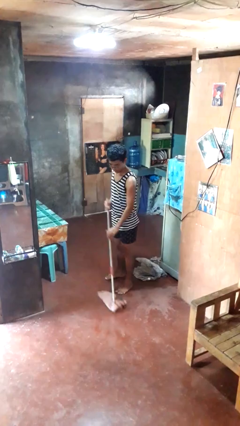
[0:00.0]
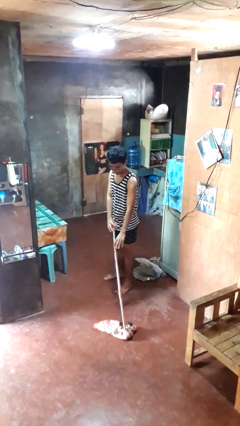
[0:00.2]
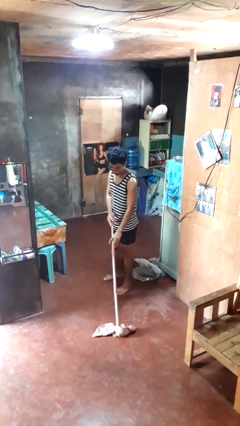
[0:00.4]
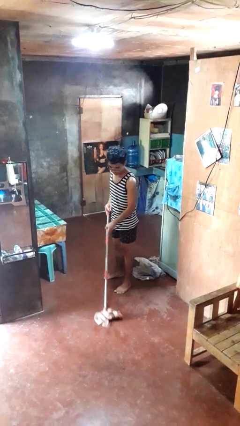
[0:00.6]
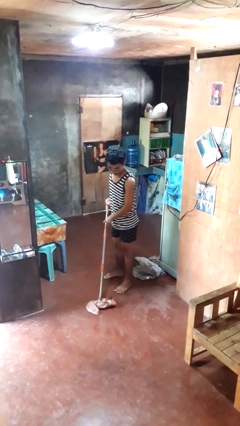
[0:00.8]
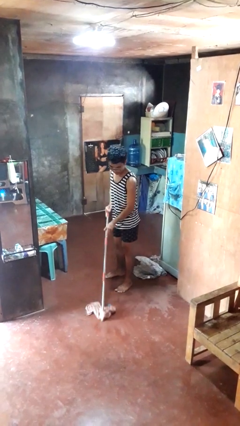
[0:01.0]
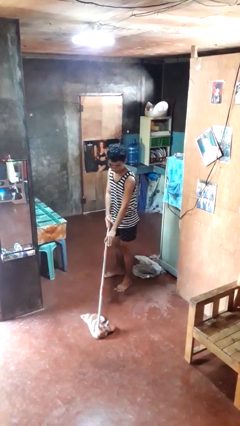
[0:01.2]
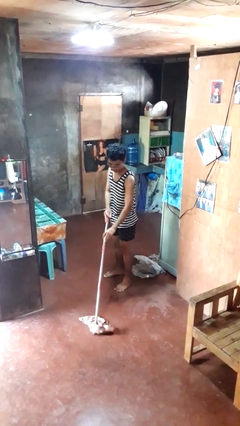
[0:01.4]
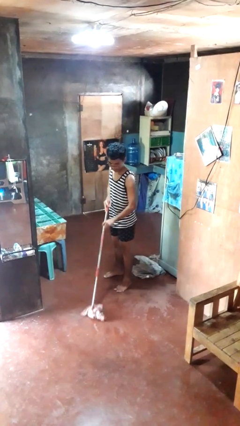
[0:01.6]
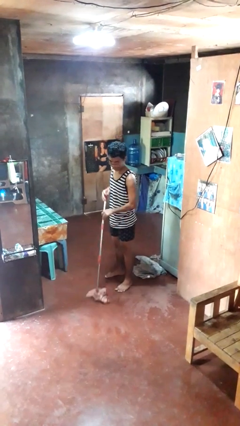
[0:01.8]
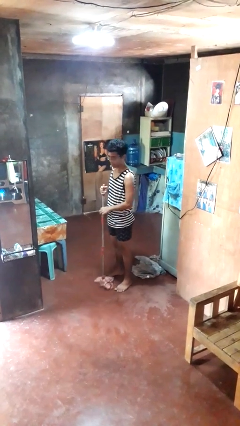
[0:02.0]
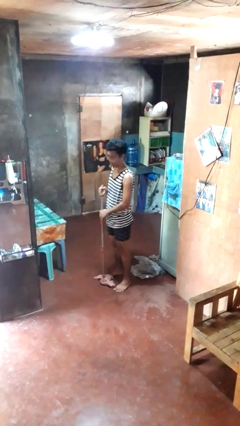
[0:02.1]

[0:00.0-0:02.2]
person mops

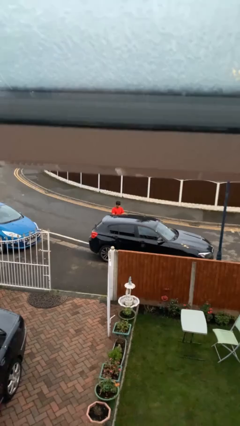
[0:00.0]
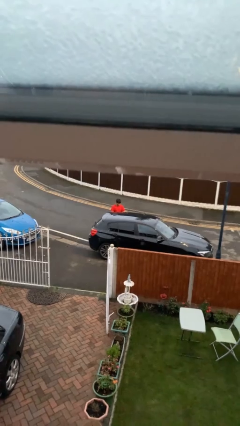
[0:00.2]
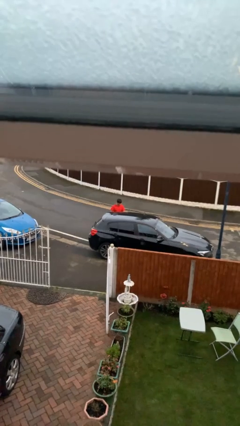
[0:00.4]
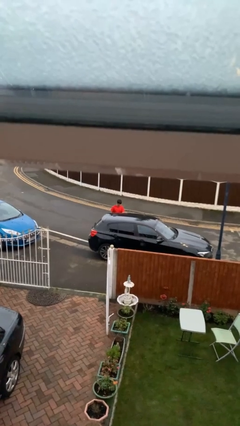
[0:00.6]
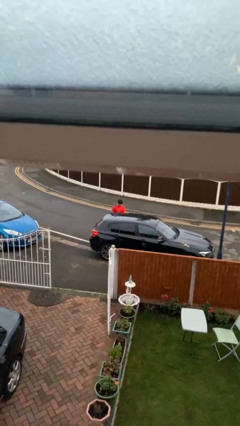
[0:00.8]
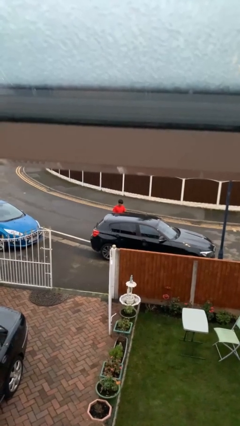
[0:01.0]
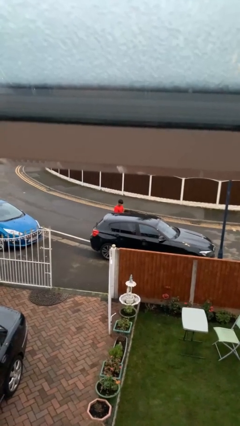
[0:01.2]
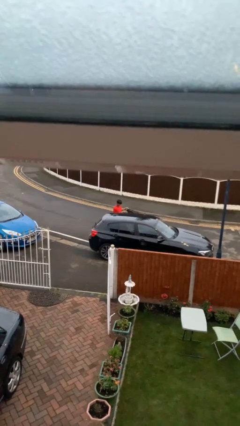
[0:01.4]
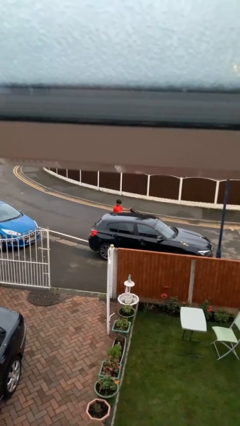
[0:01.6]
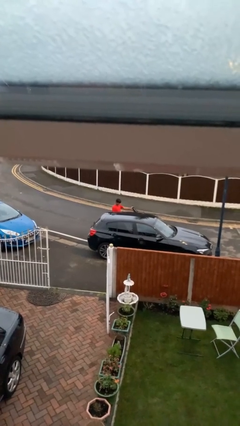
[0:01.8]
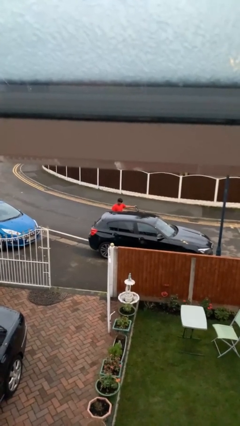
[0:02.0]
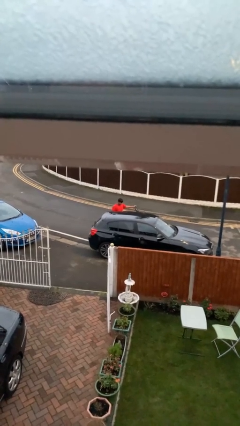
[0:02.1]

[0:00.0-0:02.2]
person opens car door

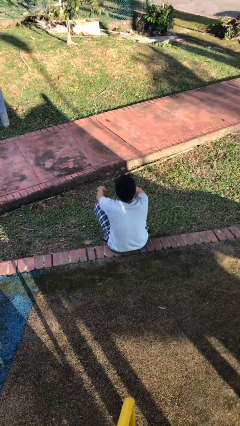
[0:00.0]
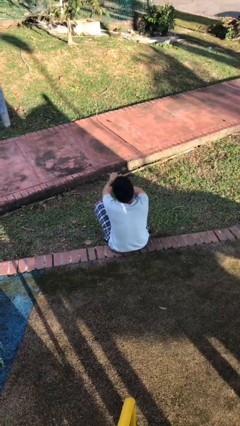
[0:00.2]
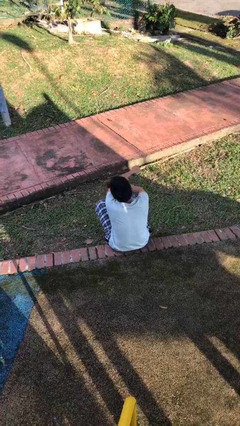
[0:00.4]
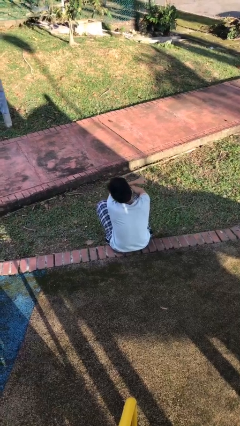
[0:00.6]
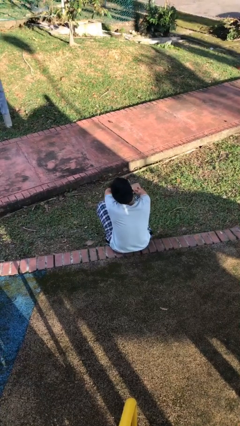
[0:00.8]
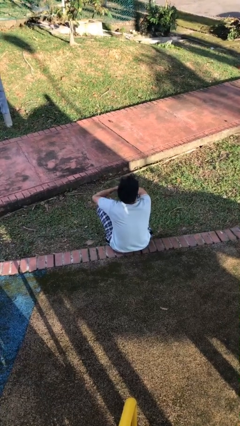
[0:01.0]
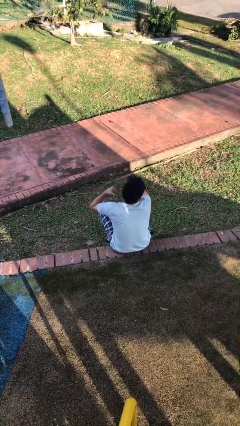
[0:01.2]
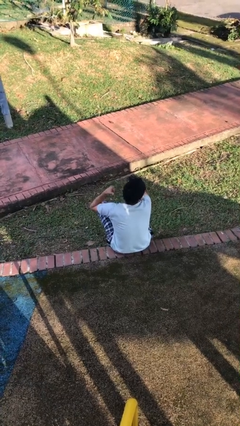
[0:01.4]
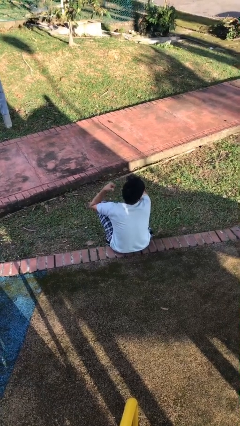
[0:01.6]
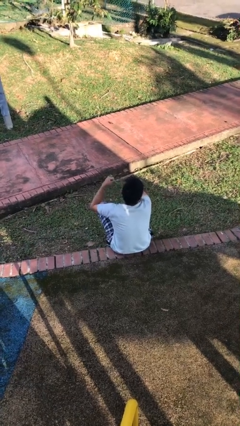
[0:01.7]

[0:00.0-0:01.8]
person gestures cut

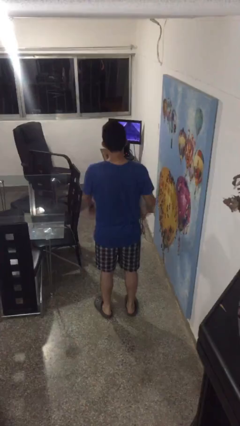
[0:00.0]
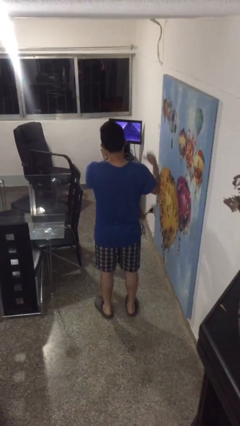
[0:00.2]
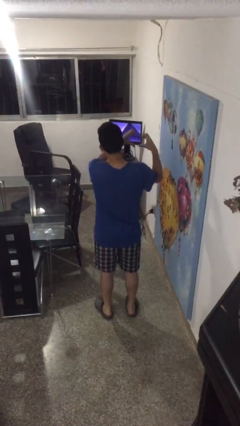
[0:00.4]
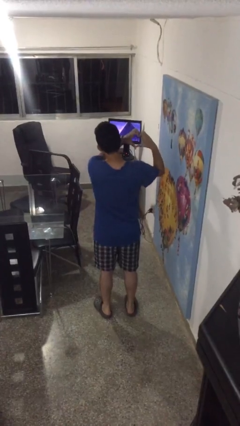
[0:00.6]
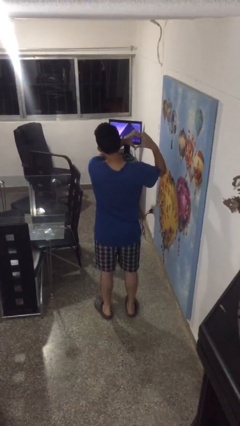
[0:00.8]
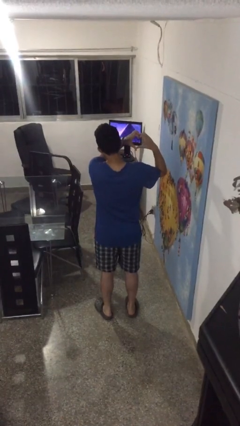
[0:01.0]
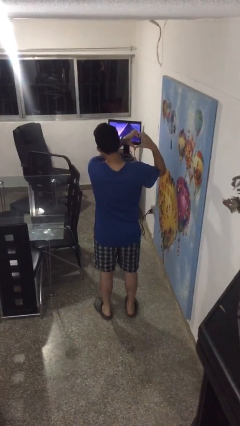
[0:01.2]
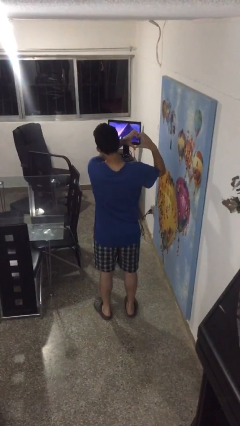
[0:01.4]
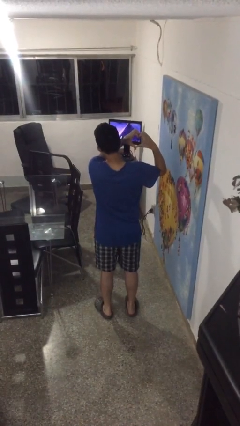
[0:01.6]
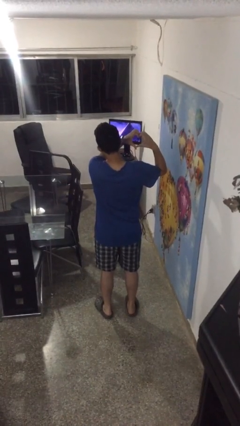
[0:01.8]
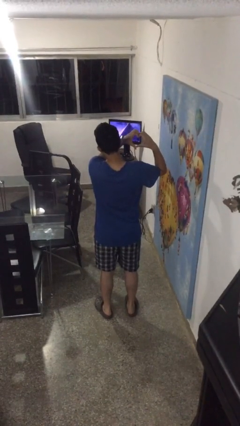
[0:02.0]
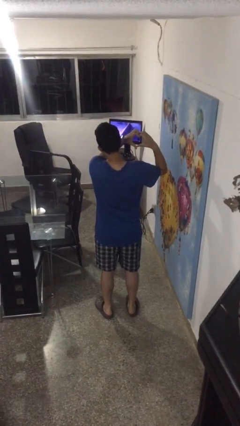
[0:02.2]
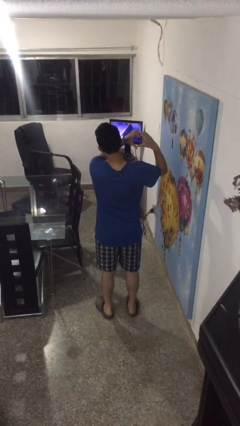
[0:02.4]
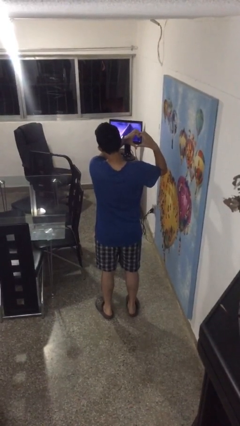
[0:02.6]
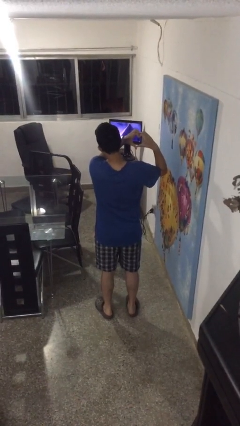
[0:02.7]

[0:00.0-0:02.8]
person gestures heart

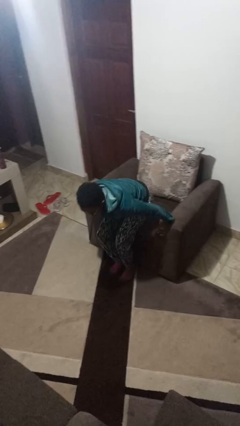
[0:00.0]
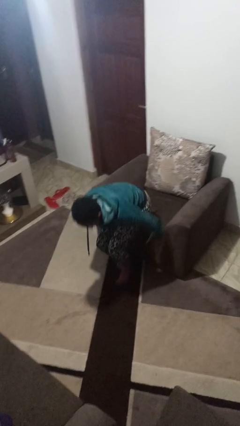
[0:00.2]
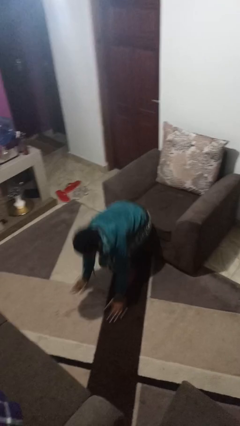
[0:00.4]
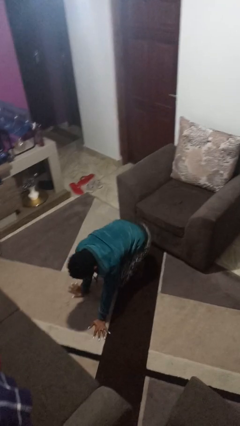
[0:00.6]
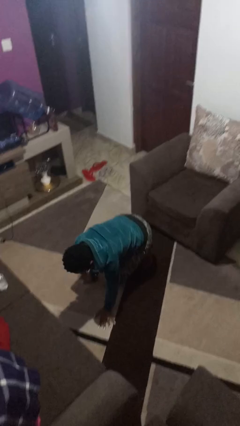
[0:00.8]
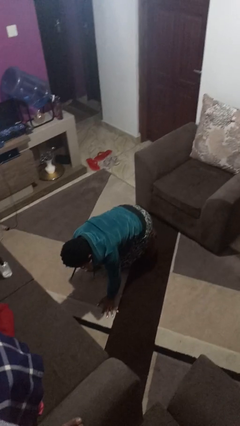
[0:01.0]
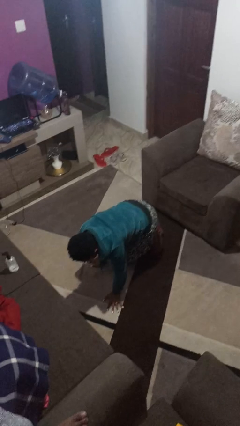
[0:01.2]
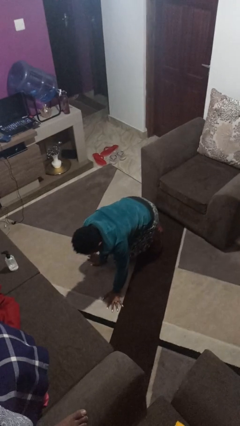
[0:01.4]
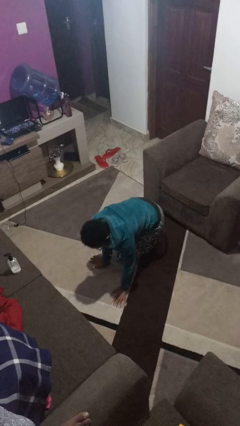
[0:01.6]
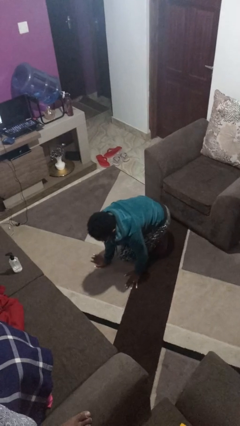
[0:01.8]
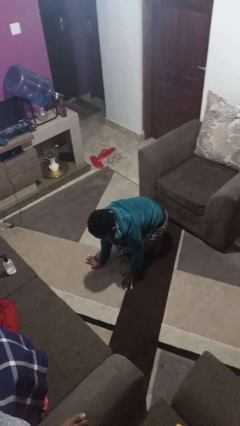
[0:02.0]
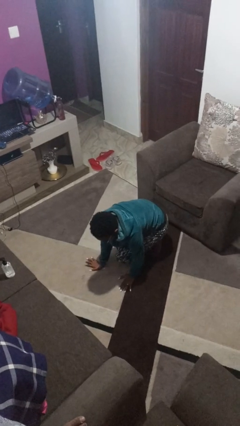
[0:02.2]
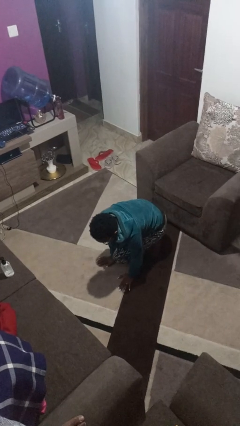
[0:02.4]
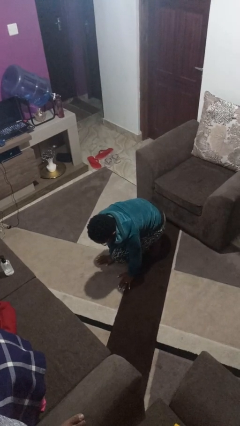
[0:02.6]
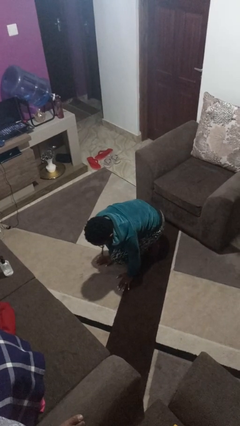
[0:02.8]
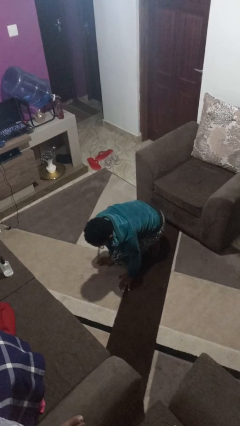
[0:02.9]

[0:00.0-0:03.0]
person falls from chair

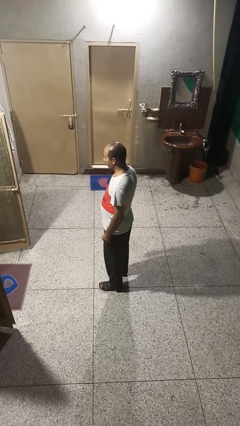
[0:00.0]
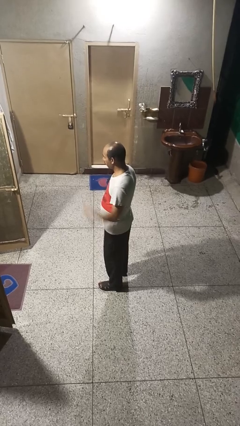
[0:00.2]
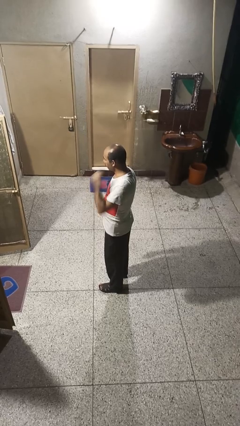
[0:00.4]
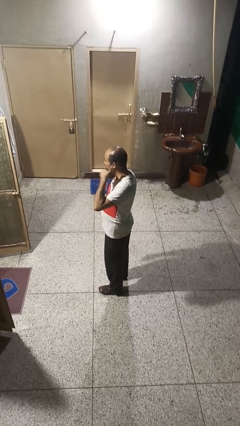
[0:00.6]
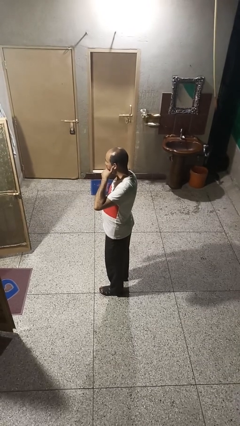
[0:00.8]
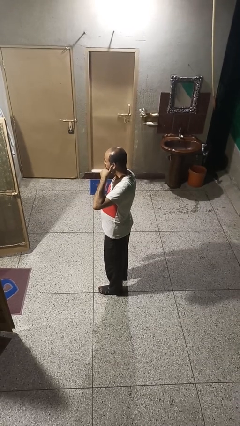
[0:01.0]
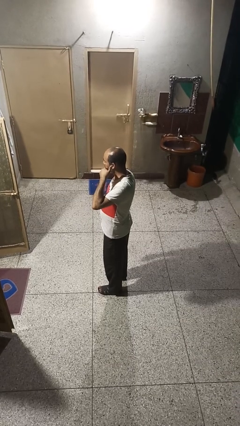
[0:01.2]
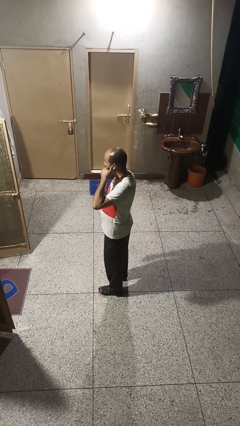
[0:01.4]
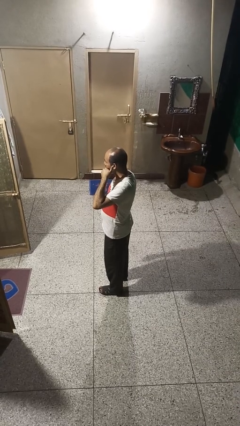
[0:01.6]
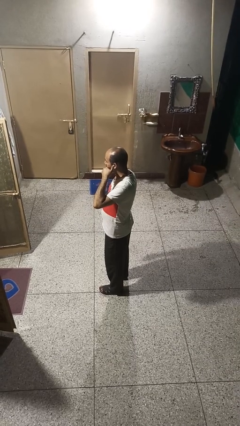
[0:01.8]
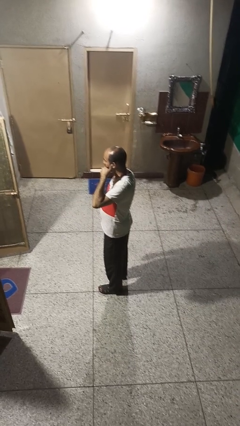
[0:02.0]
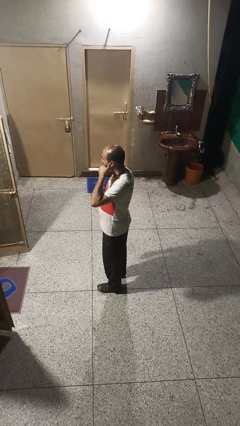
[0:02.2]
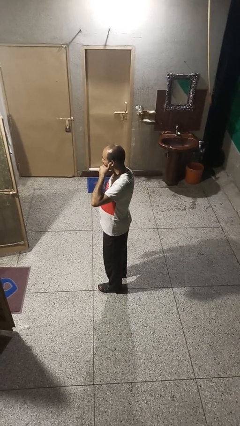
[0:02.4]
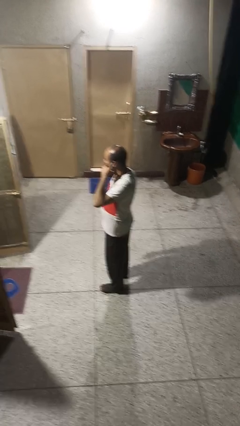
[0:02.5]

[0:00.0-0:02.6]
person gestures call me

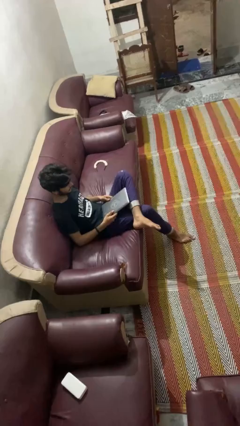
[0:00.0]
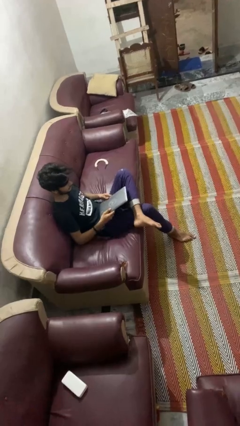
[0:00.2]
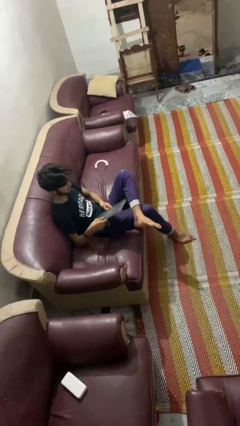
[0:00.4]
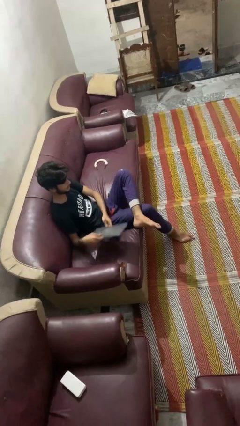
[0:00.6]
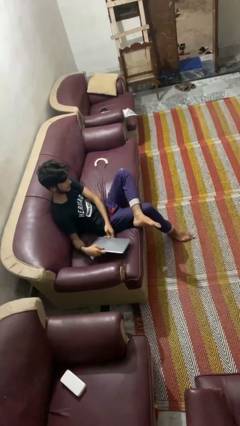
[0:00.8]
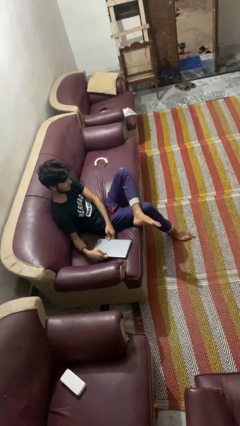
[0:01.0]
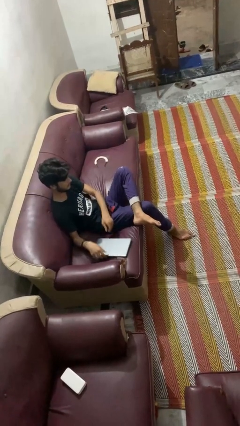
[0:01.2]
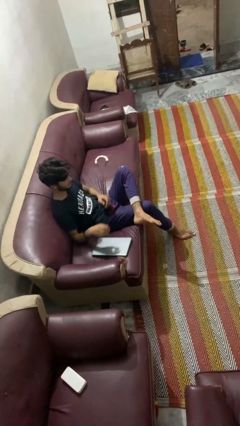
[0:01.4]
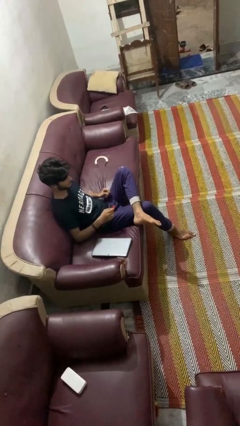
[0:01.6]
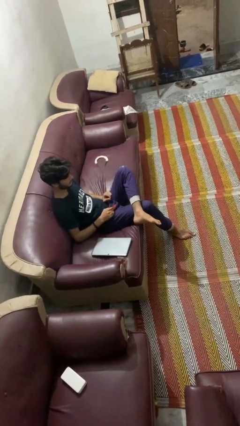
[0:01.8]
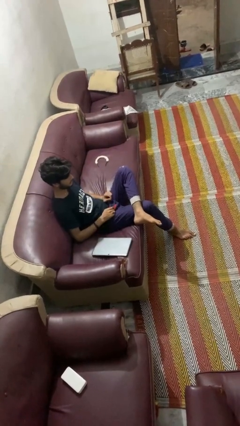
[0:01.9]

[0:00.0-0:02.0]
person puts down object on couch

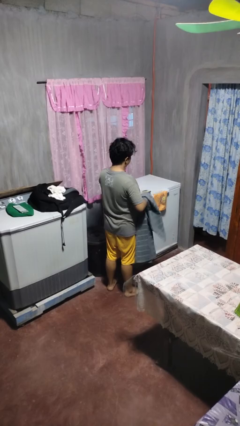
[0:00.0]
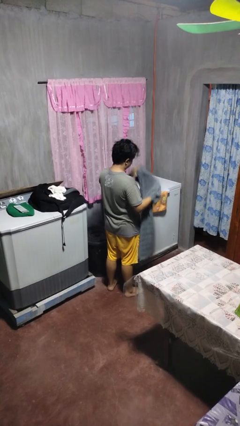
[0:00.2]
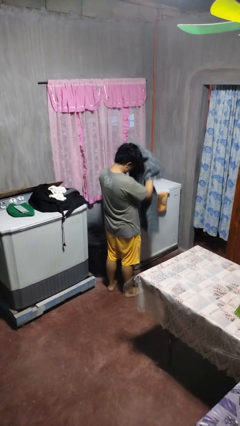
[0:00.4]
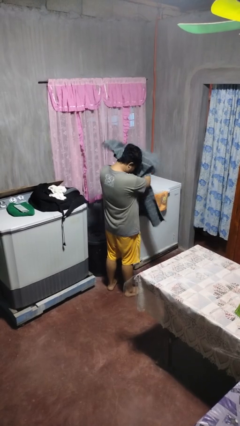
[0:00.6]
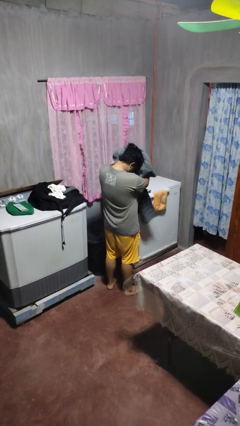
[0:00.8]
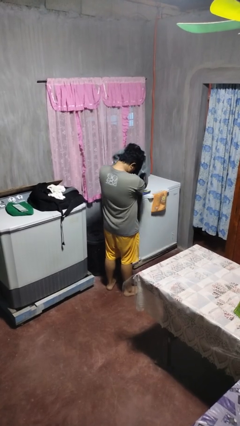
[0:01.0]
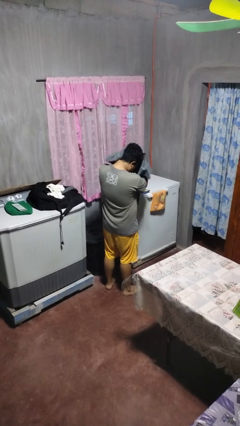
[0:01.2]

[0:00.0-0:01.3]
person dries hair with towel
